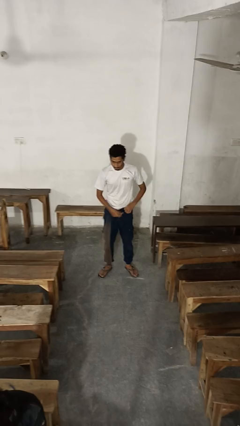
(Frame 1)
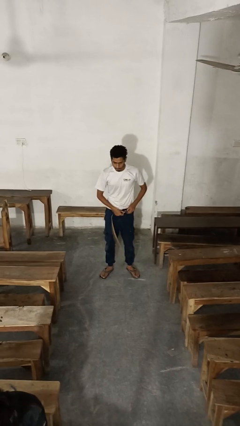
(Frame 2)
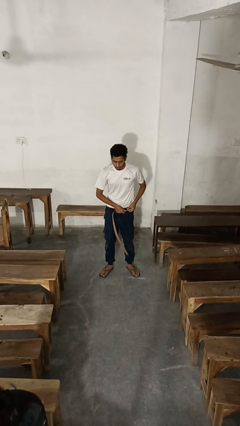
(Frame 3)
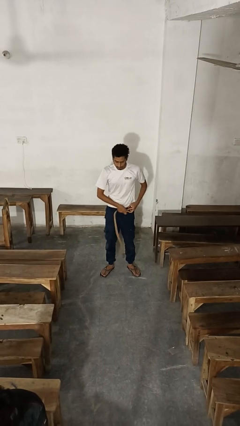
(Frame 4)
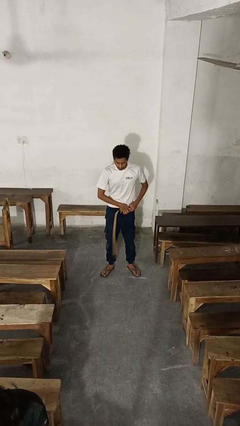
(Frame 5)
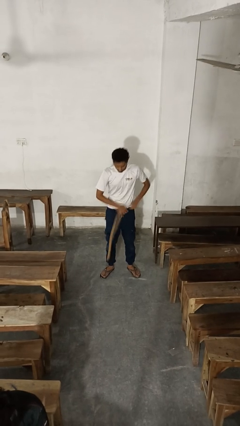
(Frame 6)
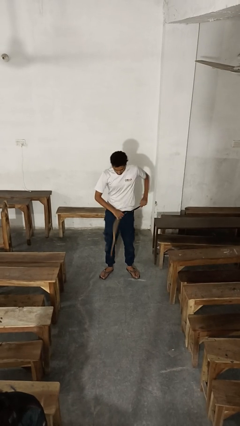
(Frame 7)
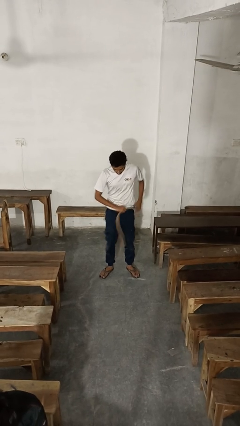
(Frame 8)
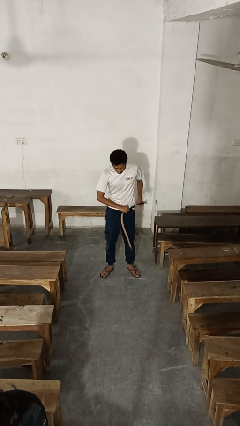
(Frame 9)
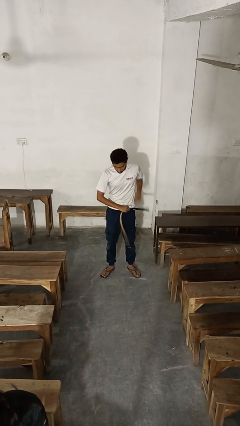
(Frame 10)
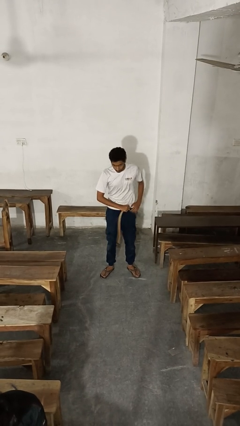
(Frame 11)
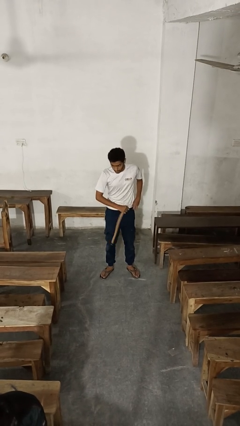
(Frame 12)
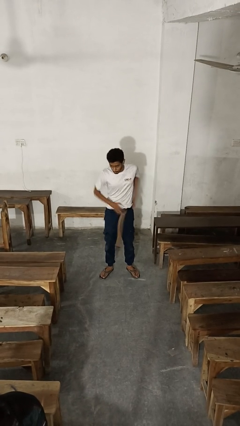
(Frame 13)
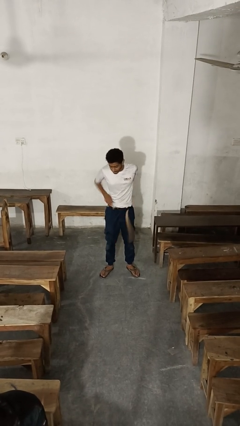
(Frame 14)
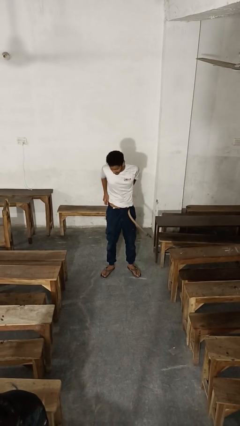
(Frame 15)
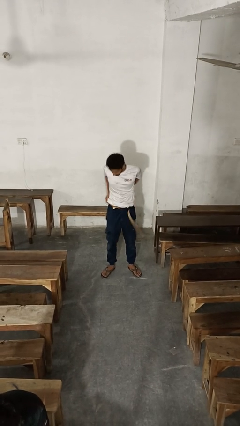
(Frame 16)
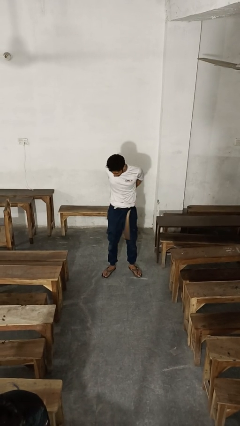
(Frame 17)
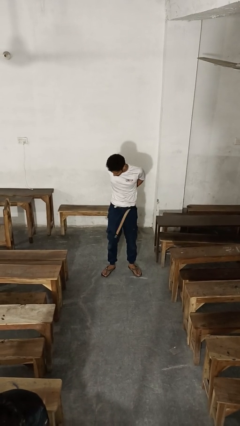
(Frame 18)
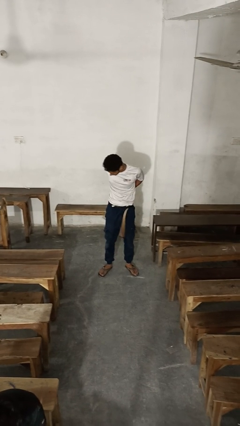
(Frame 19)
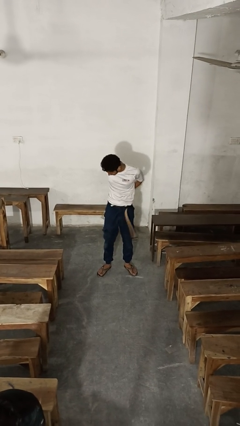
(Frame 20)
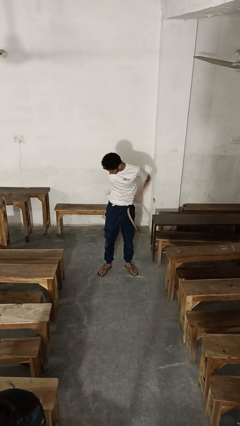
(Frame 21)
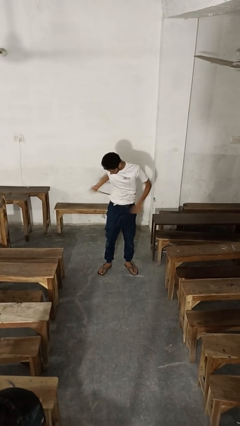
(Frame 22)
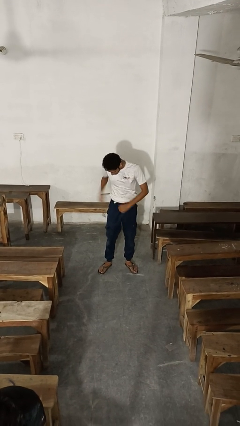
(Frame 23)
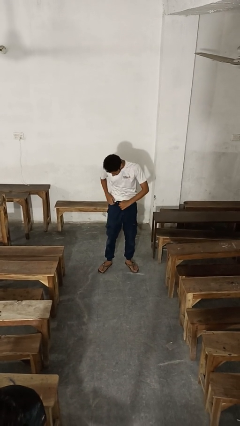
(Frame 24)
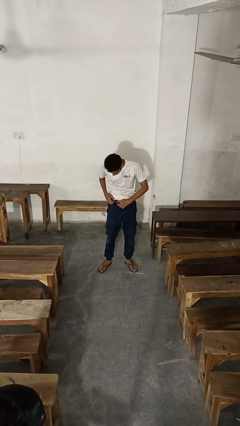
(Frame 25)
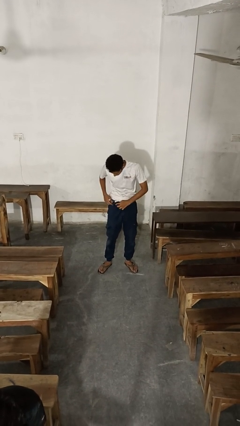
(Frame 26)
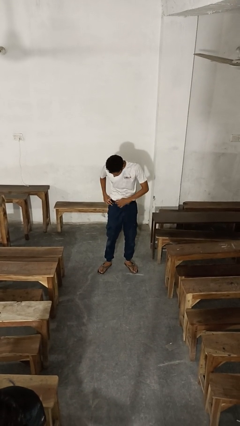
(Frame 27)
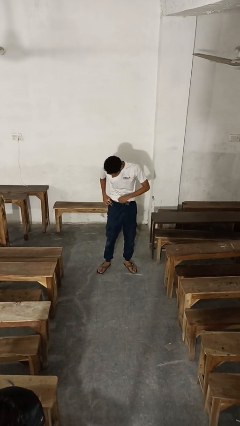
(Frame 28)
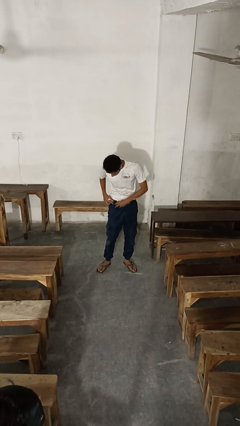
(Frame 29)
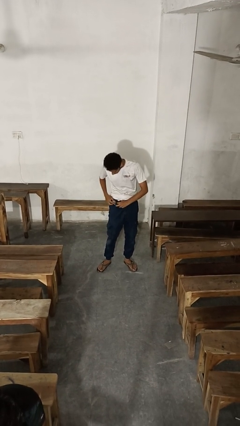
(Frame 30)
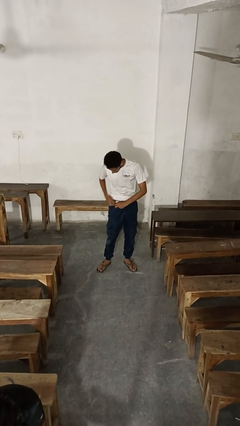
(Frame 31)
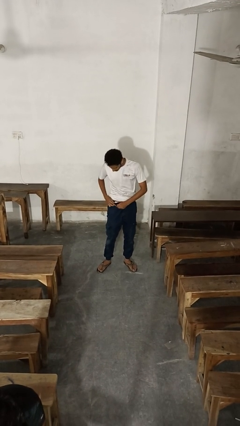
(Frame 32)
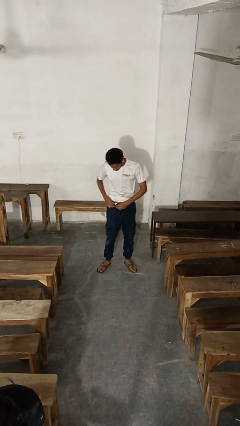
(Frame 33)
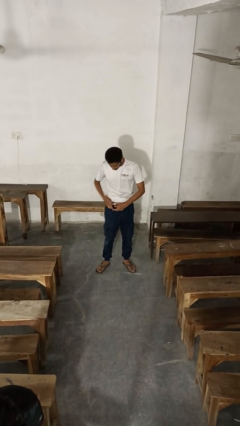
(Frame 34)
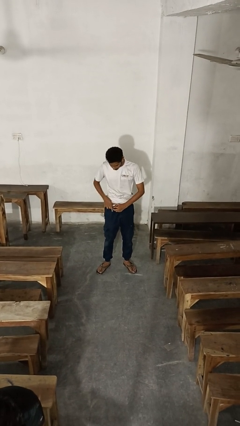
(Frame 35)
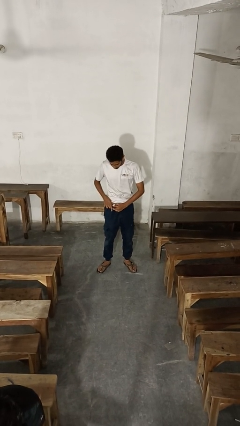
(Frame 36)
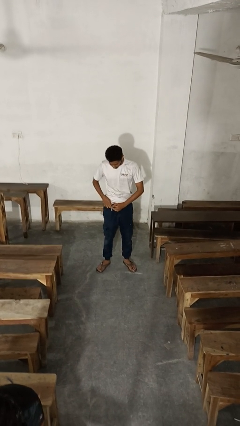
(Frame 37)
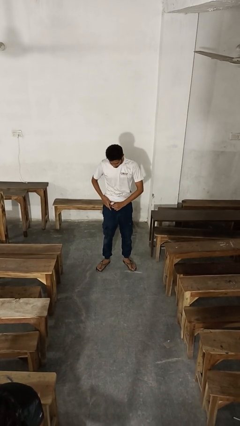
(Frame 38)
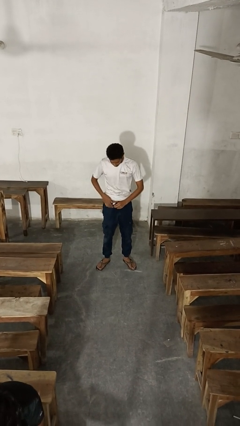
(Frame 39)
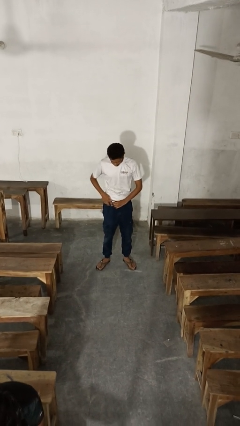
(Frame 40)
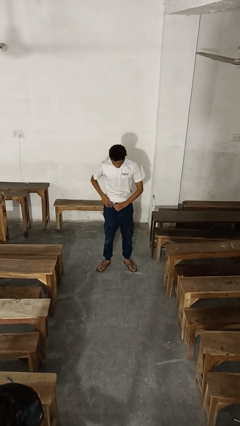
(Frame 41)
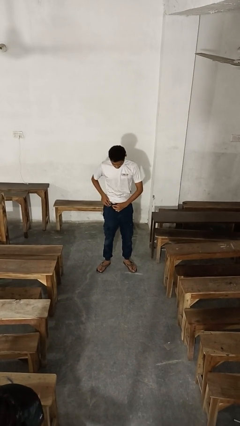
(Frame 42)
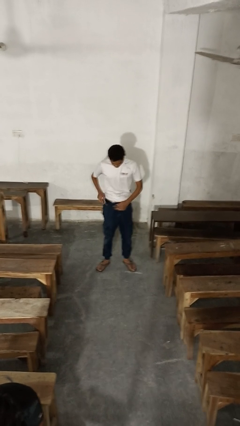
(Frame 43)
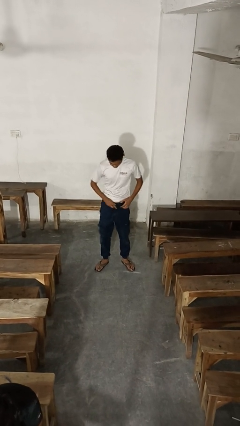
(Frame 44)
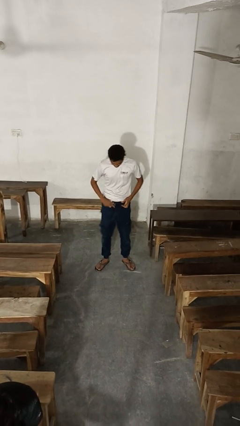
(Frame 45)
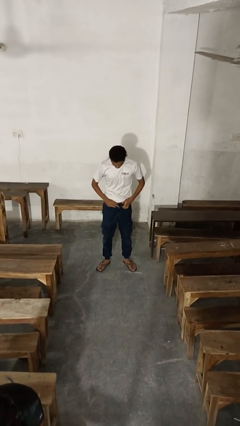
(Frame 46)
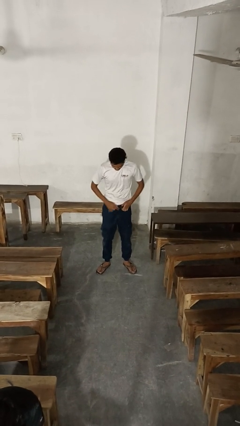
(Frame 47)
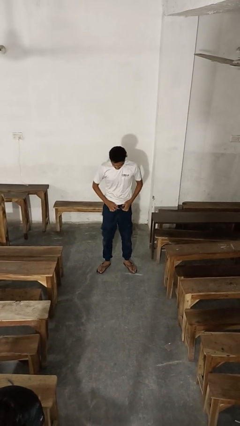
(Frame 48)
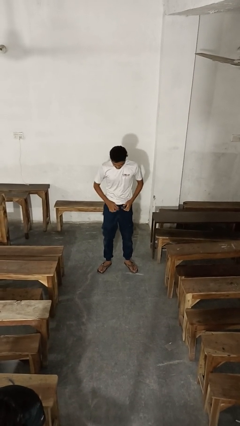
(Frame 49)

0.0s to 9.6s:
person puts on belt

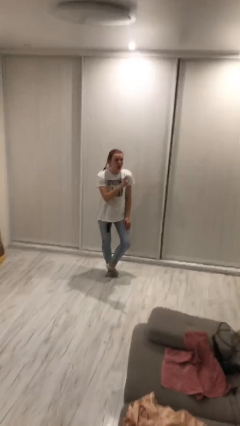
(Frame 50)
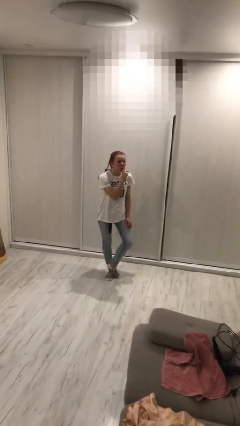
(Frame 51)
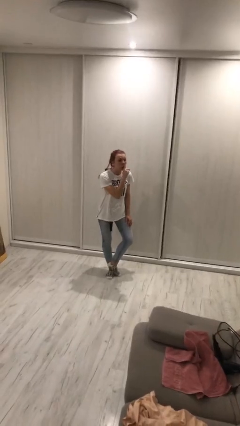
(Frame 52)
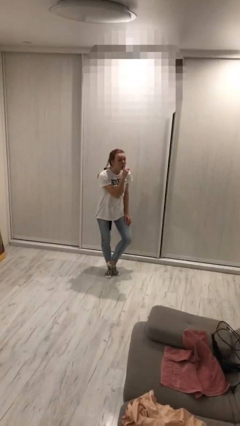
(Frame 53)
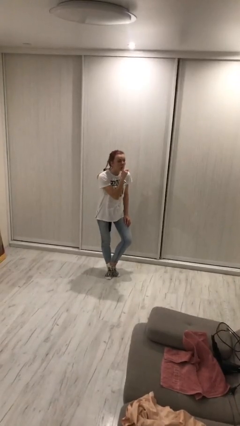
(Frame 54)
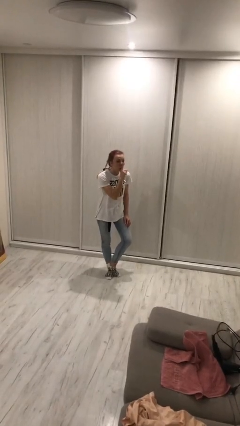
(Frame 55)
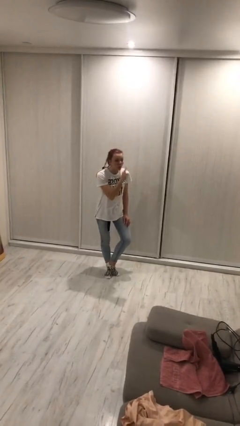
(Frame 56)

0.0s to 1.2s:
person gestures be quiet

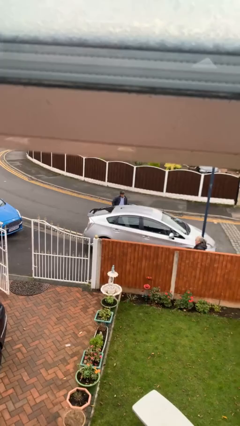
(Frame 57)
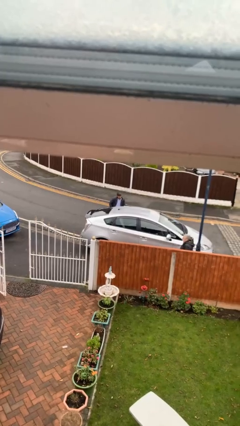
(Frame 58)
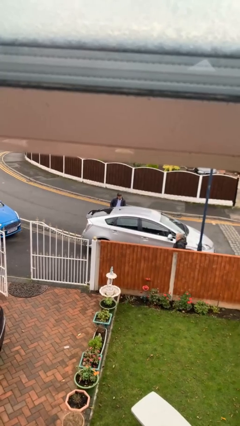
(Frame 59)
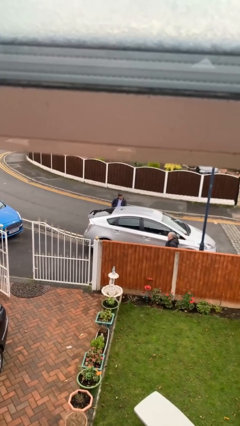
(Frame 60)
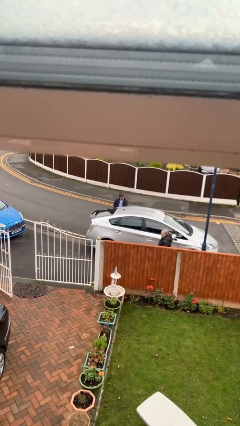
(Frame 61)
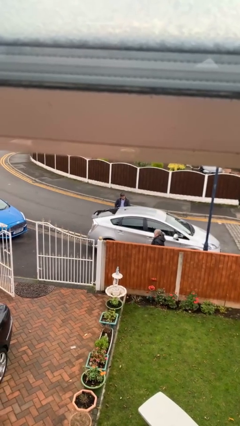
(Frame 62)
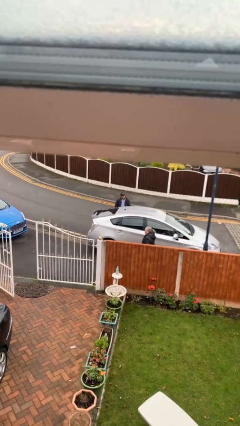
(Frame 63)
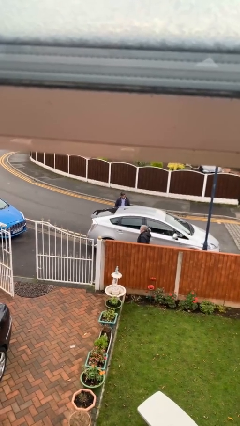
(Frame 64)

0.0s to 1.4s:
person closes car door

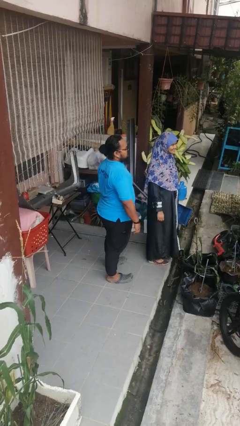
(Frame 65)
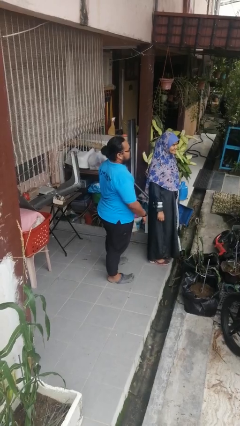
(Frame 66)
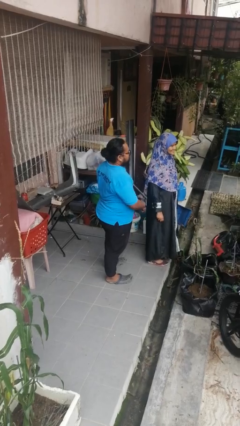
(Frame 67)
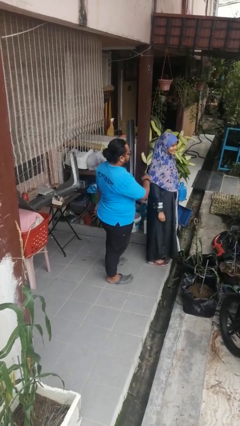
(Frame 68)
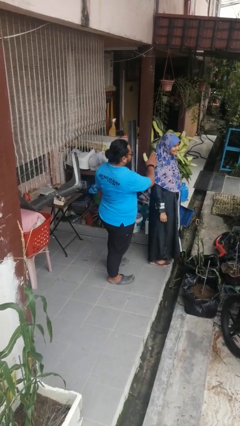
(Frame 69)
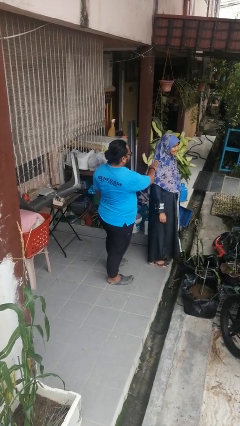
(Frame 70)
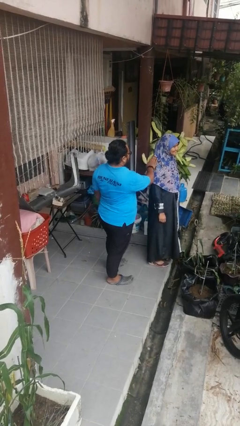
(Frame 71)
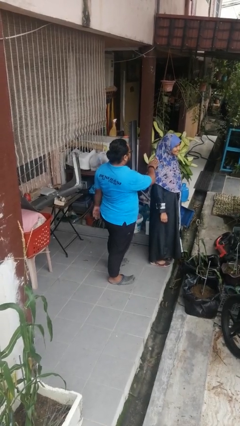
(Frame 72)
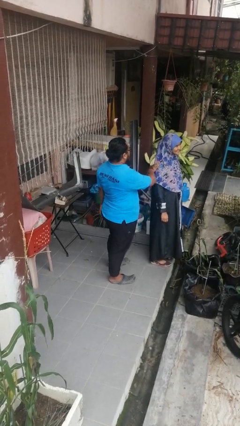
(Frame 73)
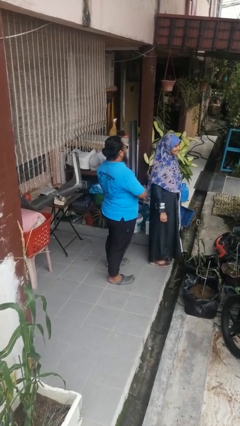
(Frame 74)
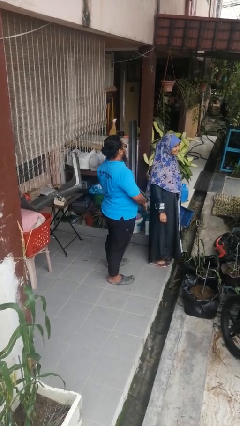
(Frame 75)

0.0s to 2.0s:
person touches back of person

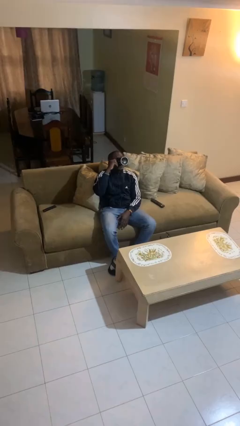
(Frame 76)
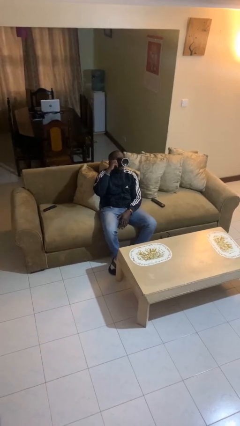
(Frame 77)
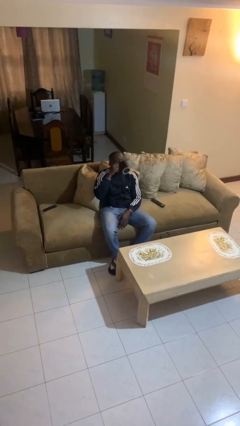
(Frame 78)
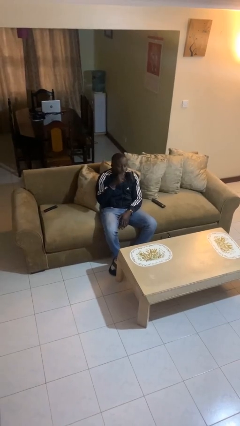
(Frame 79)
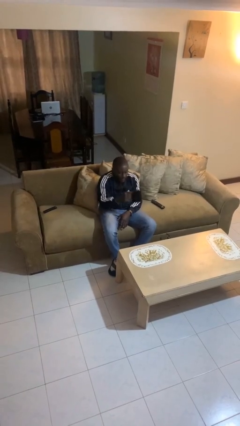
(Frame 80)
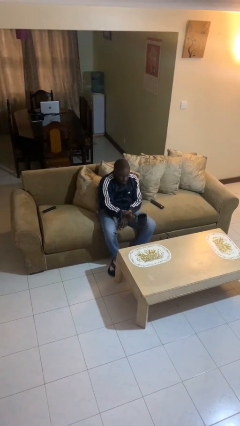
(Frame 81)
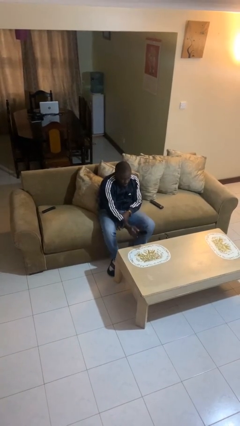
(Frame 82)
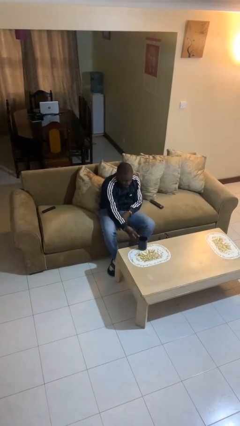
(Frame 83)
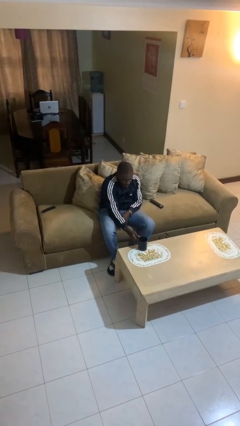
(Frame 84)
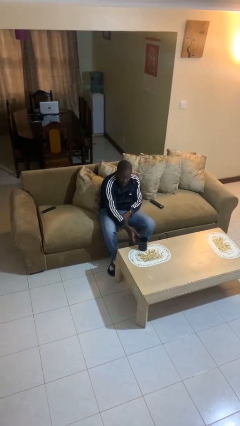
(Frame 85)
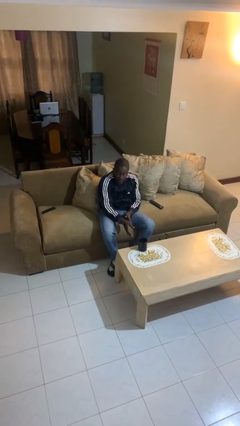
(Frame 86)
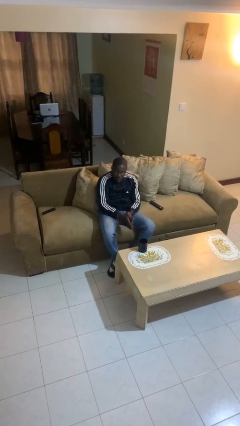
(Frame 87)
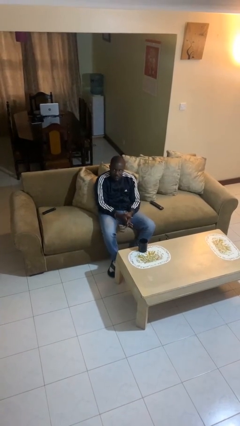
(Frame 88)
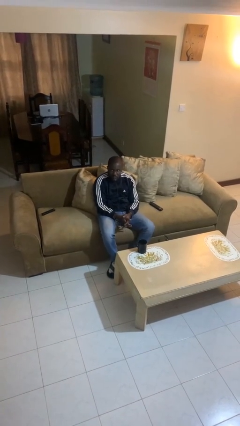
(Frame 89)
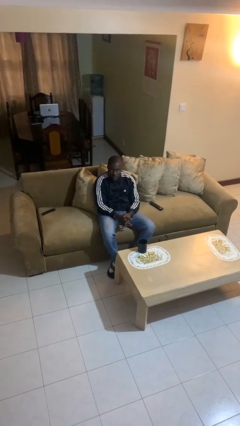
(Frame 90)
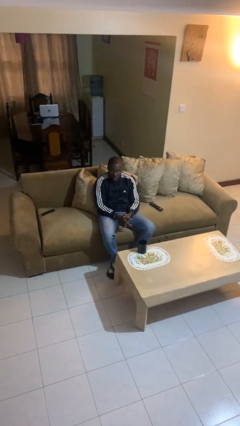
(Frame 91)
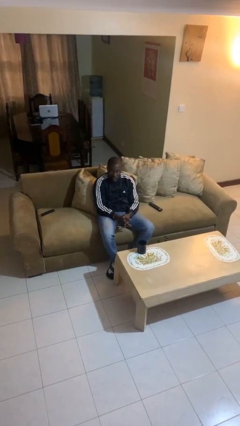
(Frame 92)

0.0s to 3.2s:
person puts down object on table

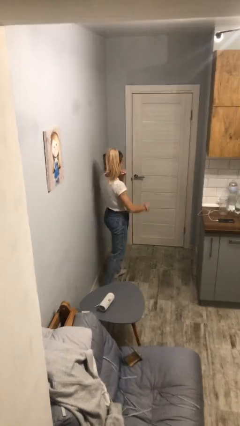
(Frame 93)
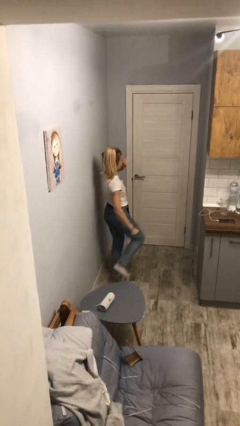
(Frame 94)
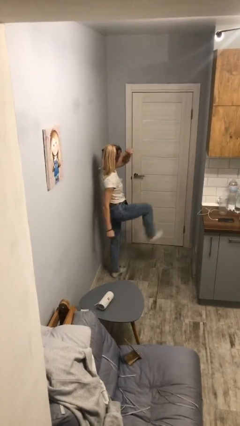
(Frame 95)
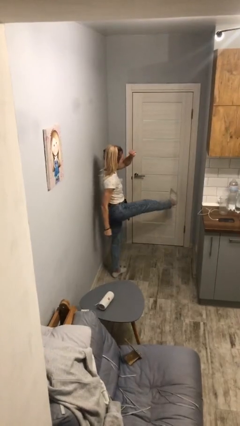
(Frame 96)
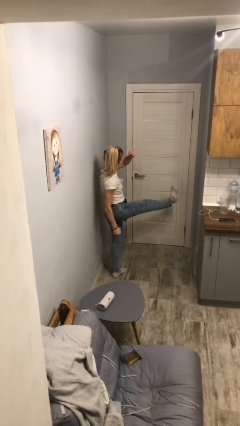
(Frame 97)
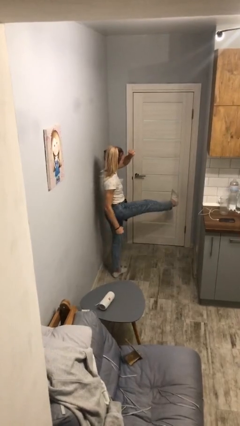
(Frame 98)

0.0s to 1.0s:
person karate kicks
